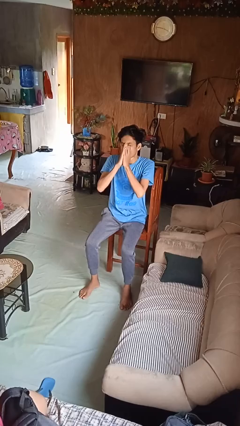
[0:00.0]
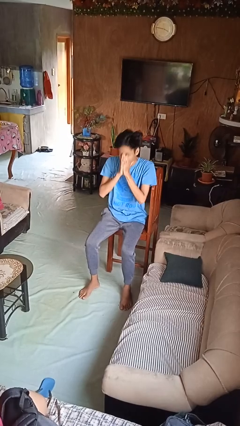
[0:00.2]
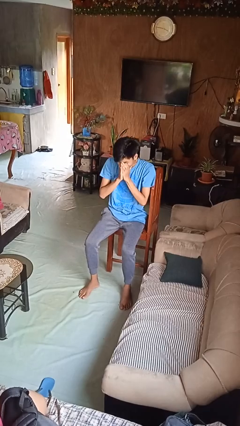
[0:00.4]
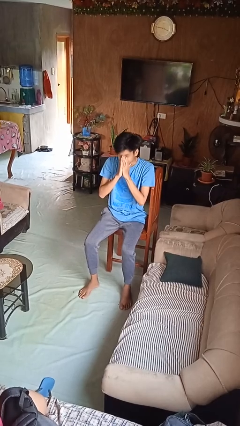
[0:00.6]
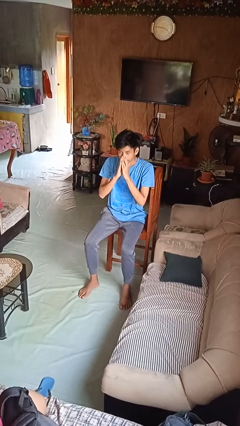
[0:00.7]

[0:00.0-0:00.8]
person sneezes into hand

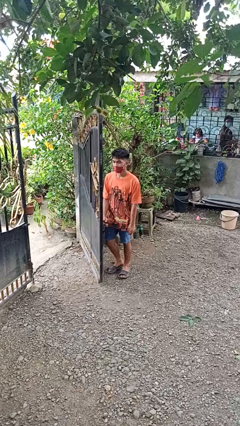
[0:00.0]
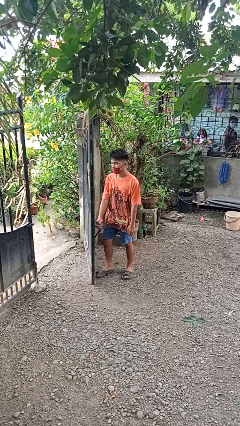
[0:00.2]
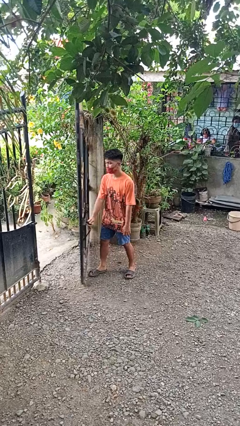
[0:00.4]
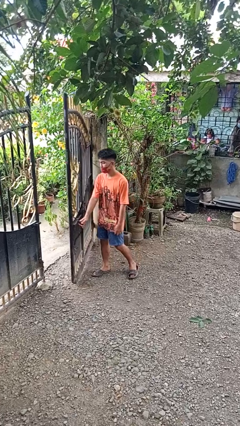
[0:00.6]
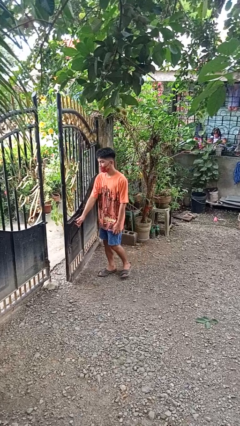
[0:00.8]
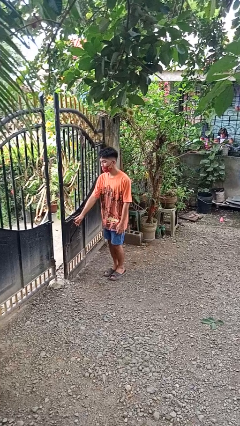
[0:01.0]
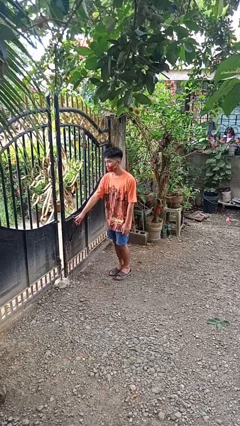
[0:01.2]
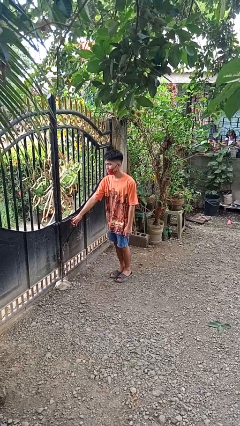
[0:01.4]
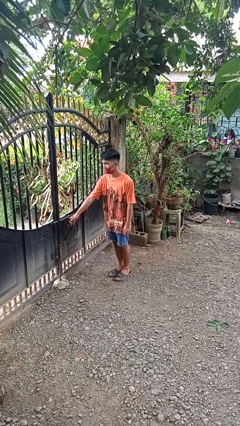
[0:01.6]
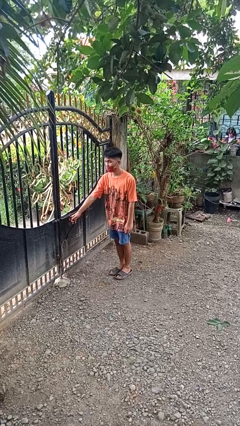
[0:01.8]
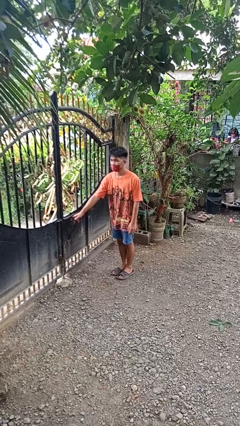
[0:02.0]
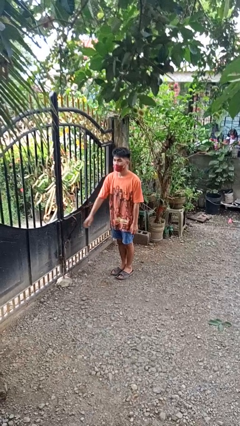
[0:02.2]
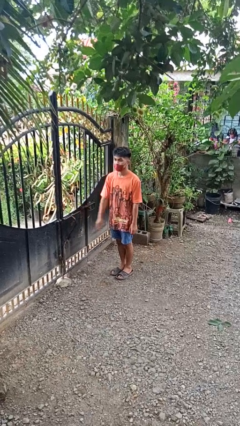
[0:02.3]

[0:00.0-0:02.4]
person closes gate

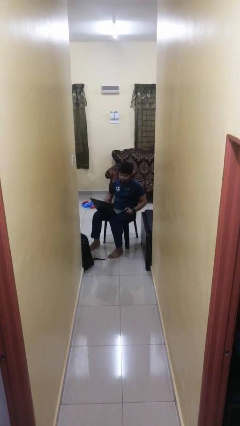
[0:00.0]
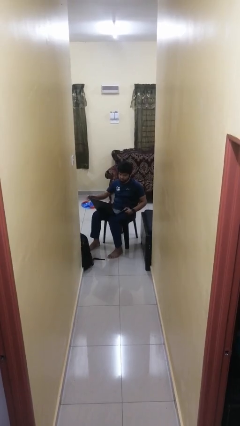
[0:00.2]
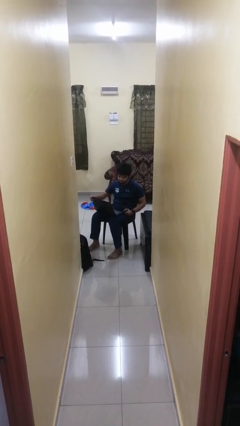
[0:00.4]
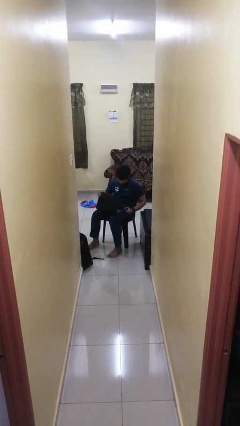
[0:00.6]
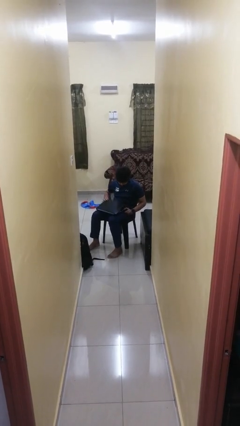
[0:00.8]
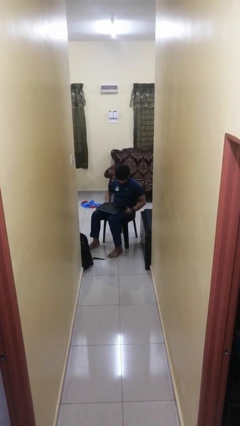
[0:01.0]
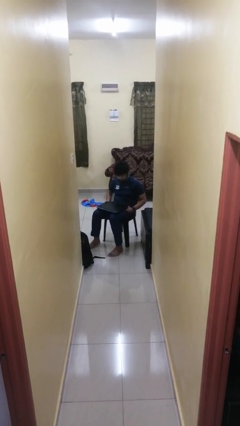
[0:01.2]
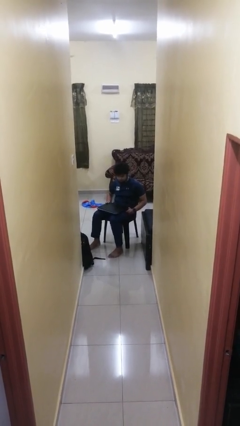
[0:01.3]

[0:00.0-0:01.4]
person closes laptop

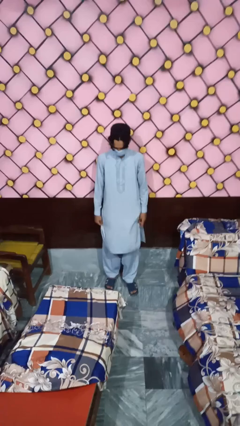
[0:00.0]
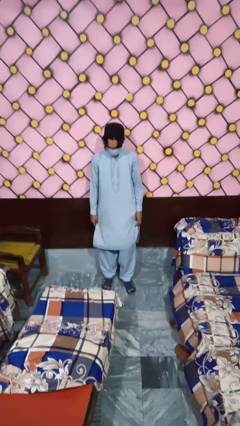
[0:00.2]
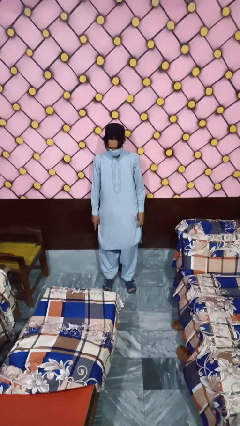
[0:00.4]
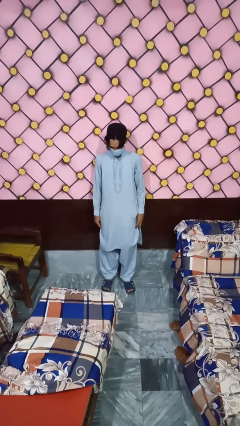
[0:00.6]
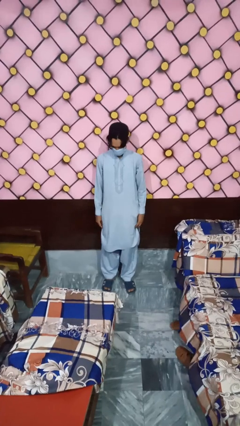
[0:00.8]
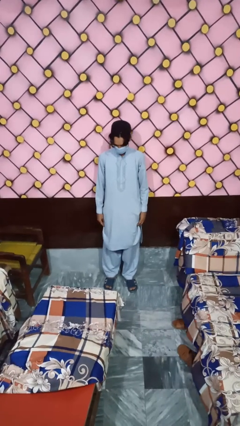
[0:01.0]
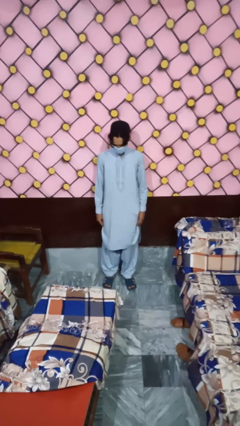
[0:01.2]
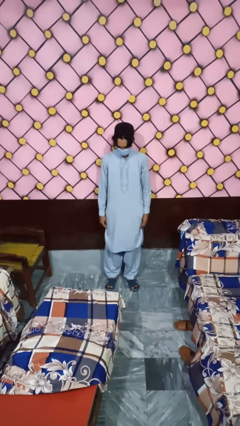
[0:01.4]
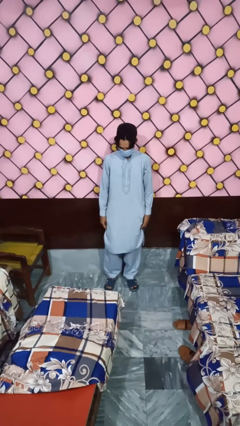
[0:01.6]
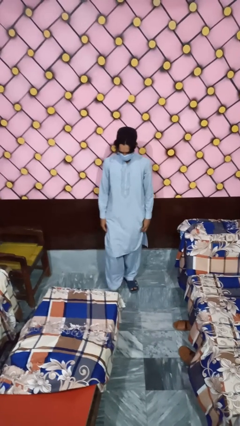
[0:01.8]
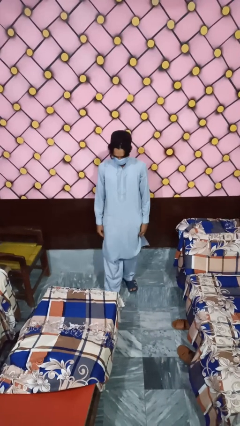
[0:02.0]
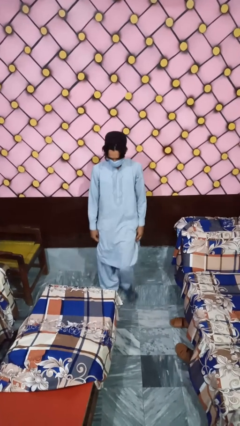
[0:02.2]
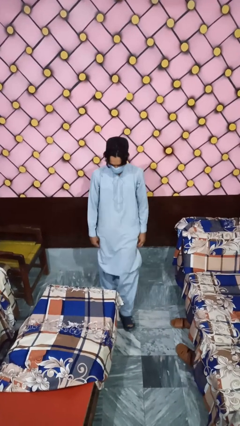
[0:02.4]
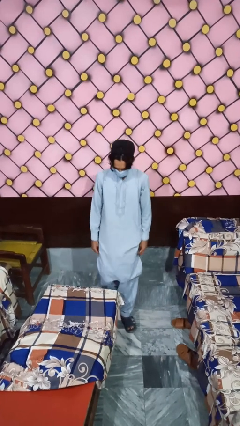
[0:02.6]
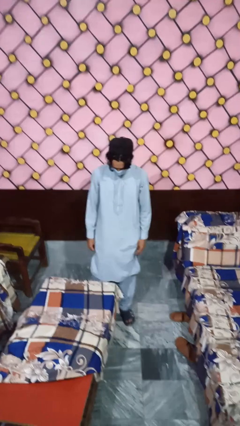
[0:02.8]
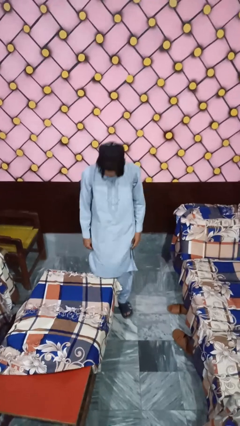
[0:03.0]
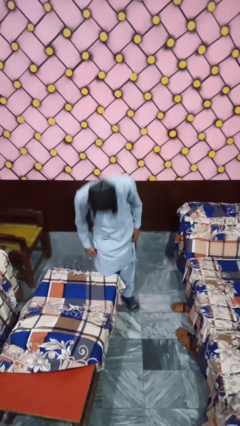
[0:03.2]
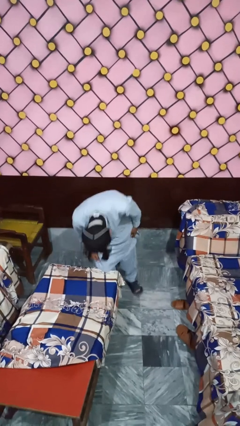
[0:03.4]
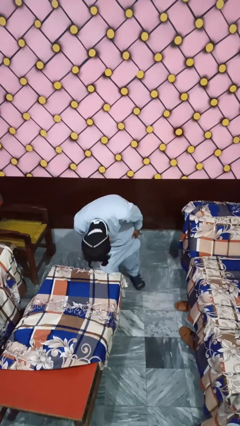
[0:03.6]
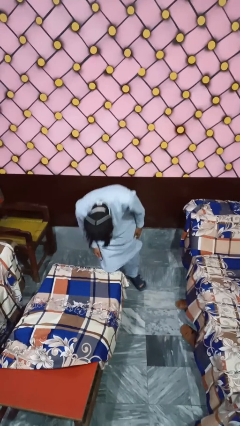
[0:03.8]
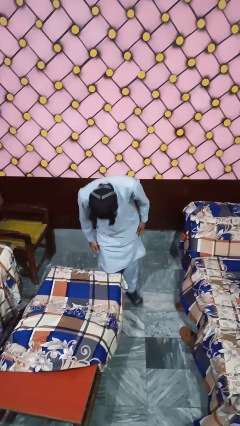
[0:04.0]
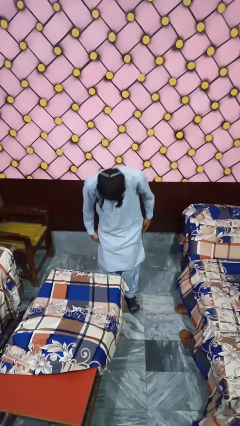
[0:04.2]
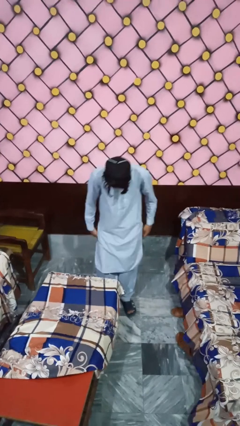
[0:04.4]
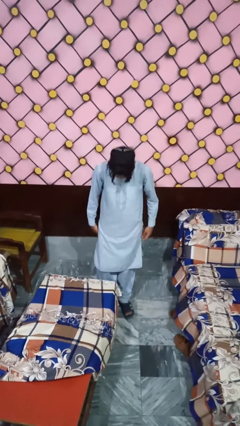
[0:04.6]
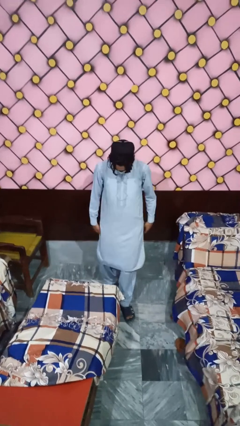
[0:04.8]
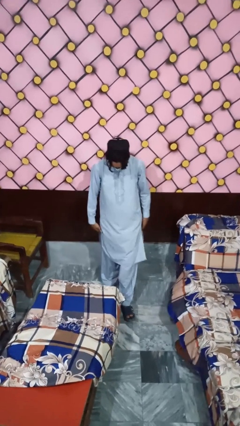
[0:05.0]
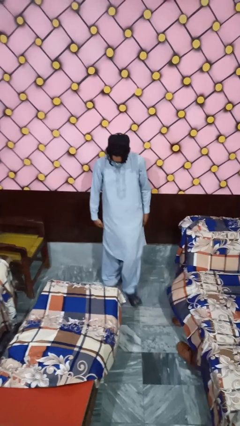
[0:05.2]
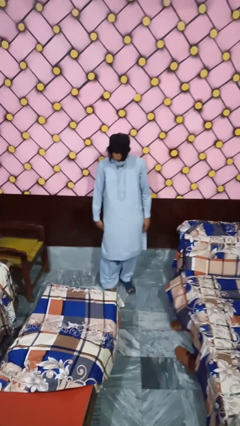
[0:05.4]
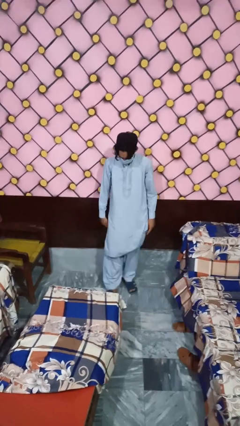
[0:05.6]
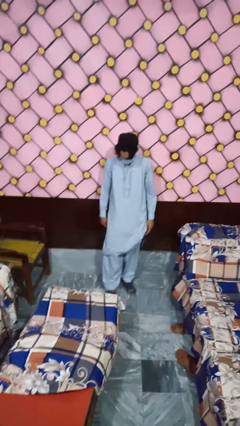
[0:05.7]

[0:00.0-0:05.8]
person bumps into table

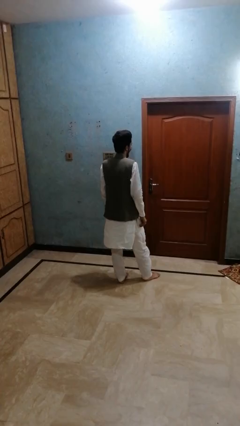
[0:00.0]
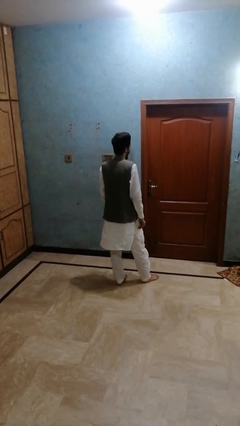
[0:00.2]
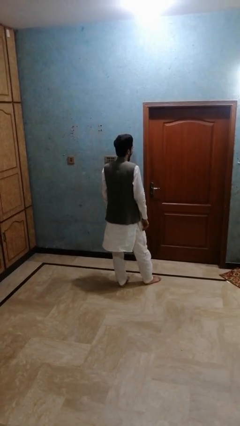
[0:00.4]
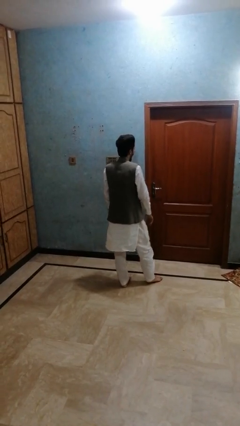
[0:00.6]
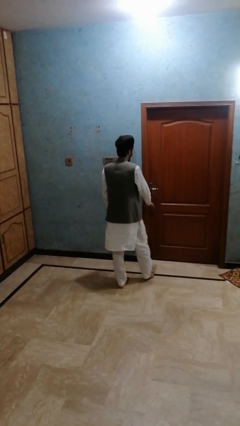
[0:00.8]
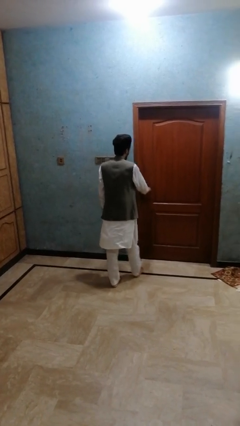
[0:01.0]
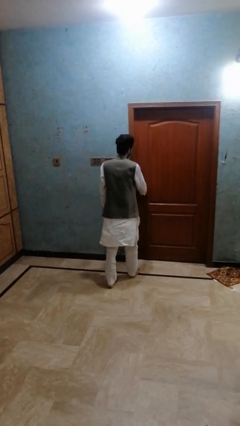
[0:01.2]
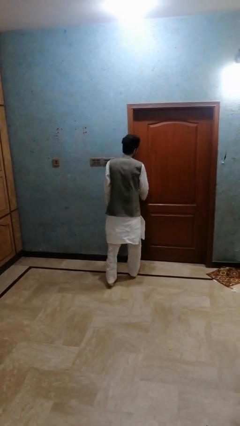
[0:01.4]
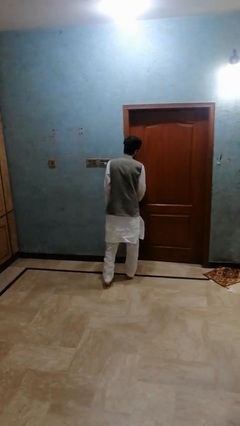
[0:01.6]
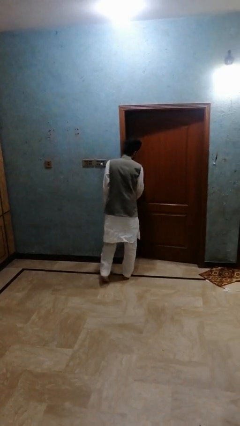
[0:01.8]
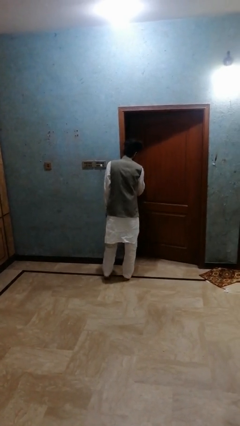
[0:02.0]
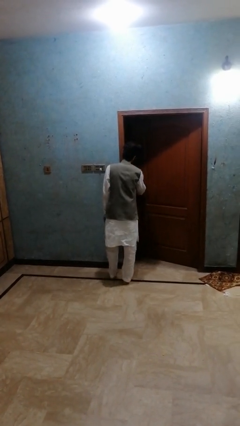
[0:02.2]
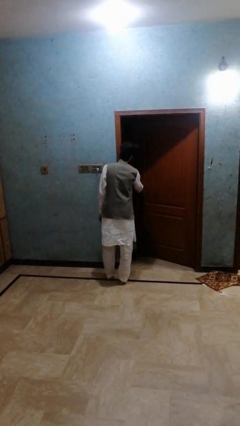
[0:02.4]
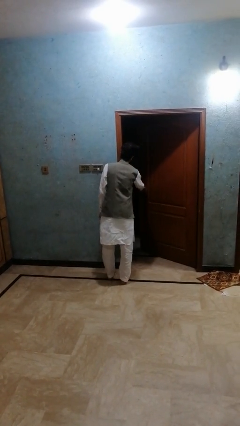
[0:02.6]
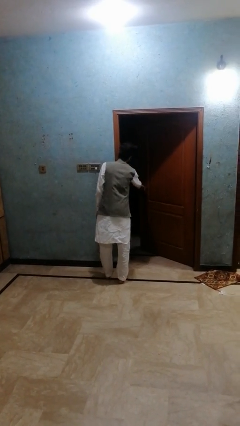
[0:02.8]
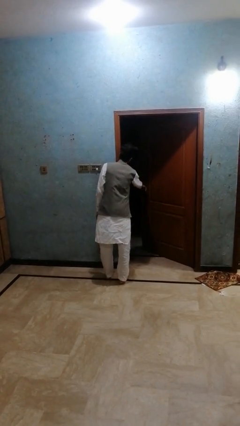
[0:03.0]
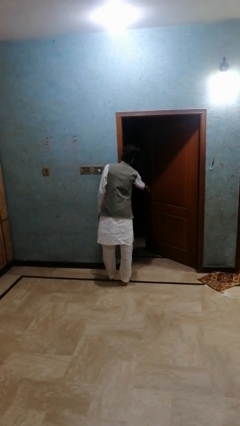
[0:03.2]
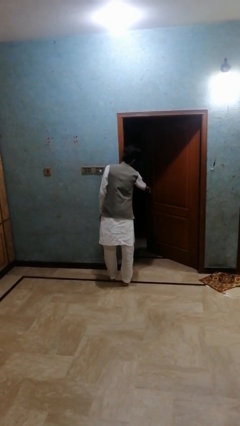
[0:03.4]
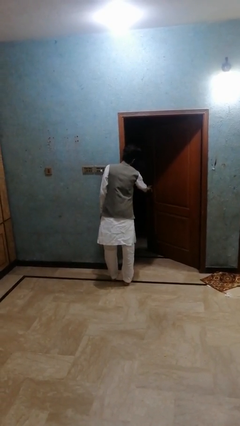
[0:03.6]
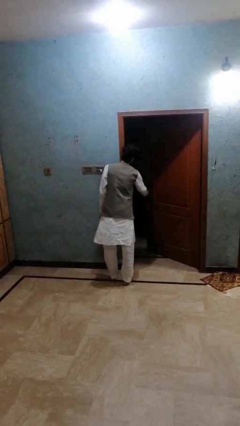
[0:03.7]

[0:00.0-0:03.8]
person opens closet door

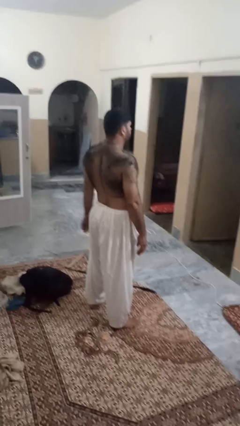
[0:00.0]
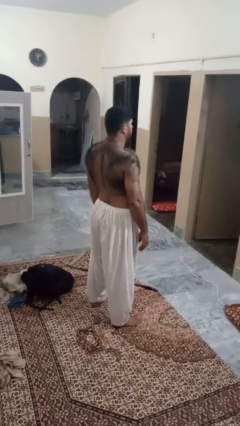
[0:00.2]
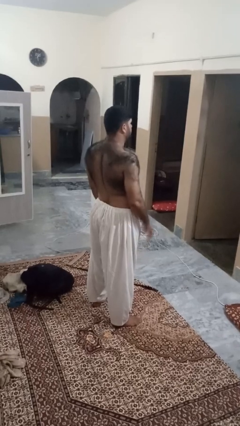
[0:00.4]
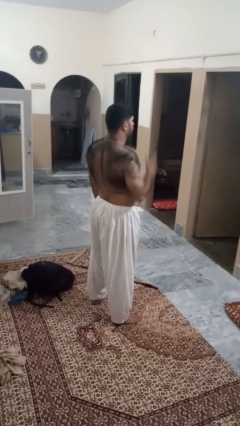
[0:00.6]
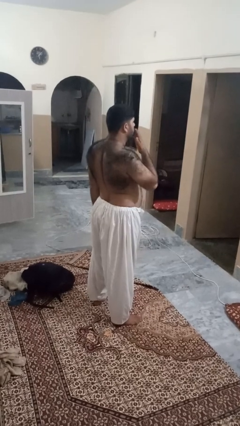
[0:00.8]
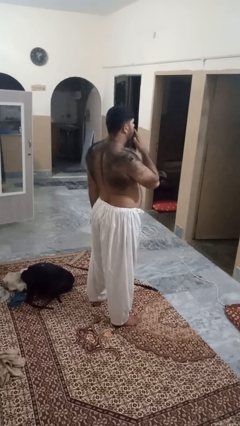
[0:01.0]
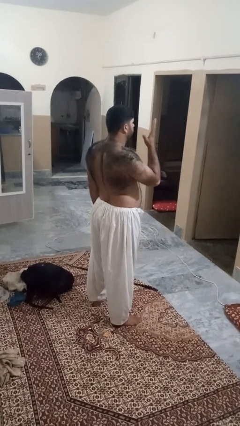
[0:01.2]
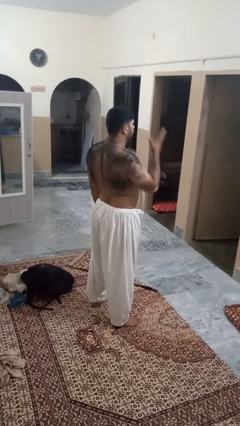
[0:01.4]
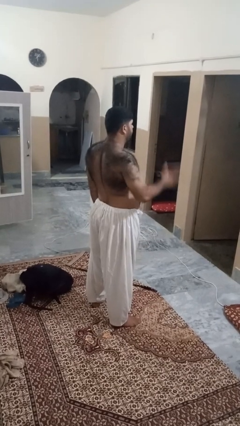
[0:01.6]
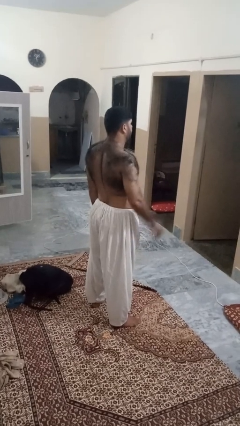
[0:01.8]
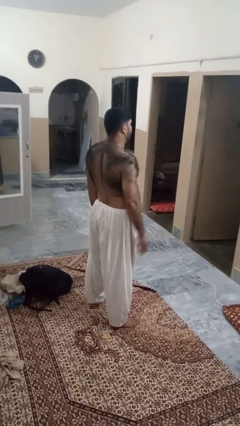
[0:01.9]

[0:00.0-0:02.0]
person gestures blow kiss

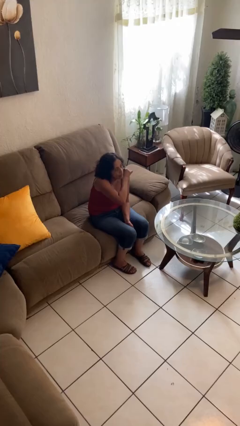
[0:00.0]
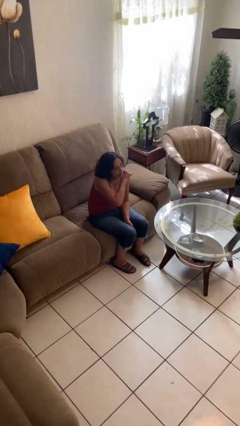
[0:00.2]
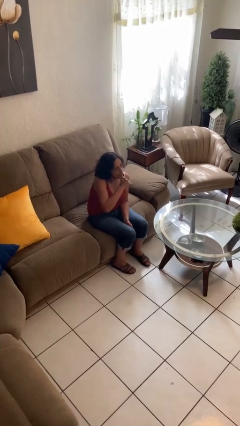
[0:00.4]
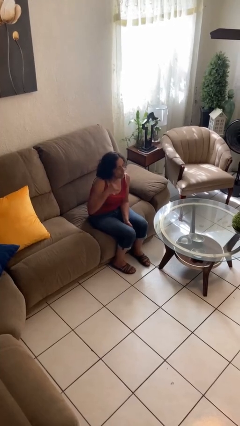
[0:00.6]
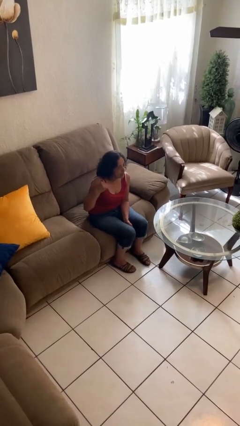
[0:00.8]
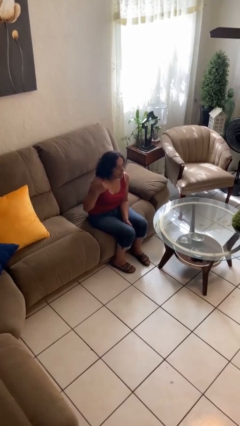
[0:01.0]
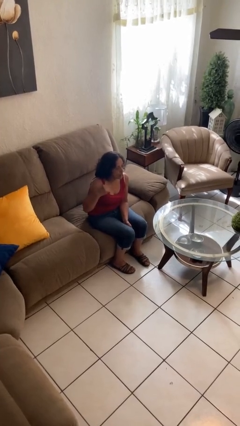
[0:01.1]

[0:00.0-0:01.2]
person gestures cut
